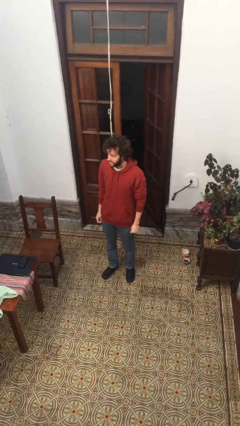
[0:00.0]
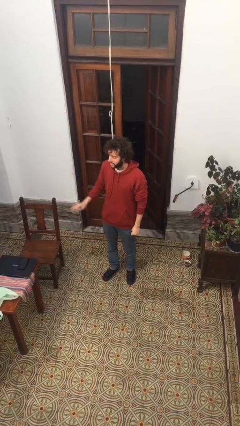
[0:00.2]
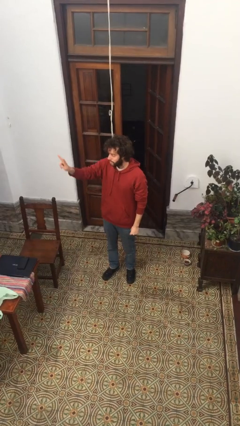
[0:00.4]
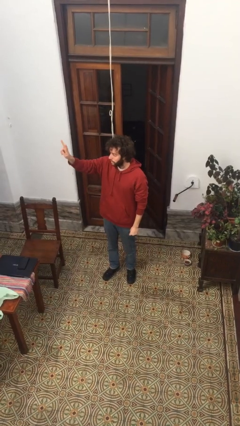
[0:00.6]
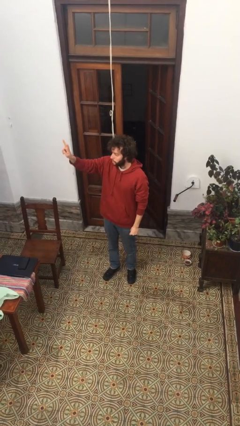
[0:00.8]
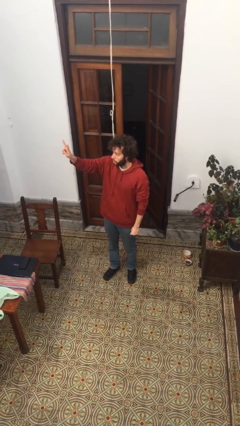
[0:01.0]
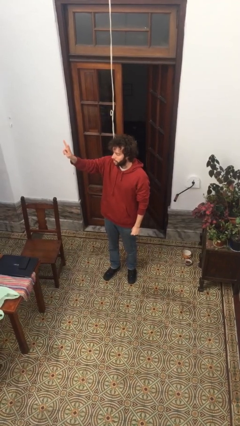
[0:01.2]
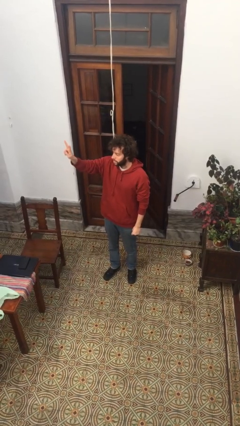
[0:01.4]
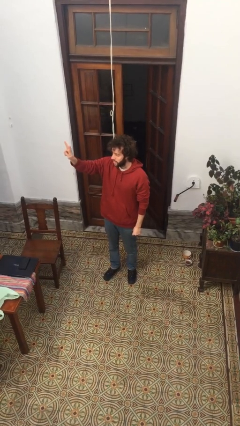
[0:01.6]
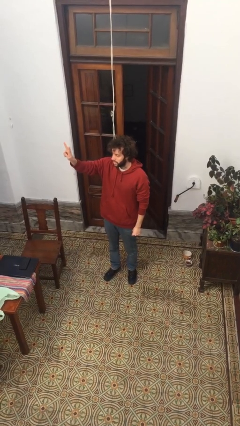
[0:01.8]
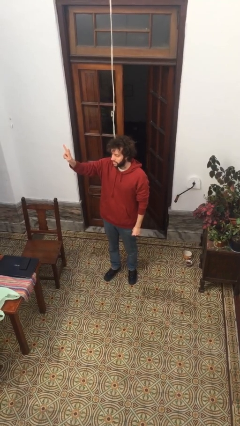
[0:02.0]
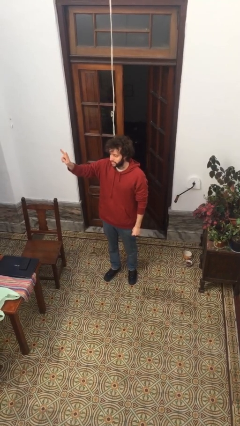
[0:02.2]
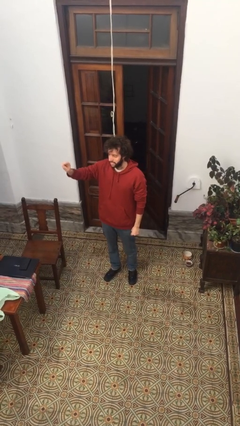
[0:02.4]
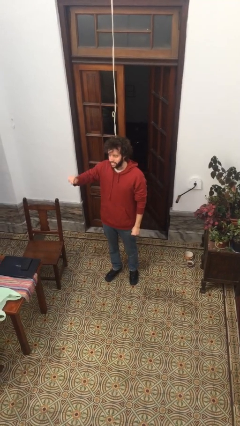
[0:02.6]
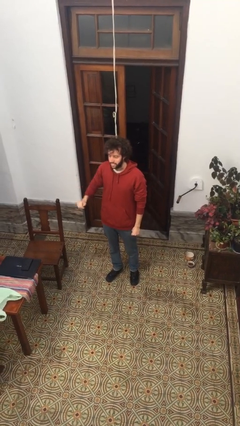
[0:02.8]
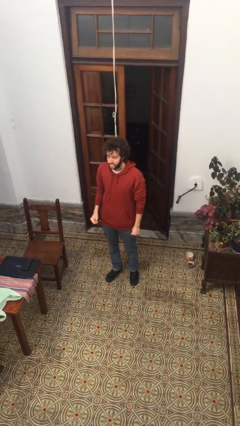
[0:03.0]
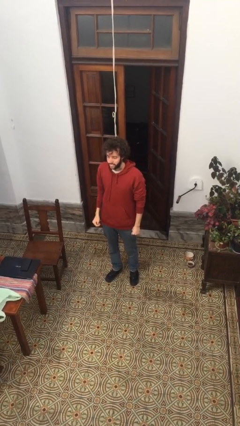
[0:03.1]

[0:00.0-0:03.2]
person gestures peace

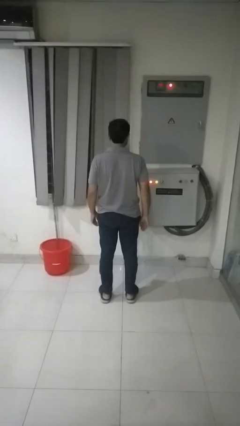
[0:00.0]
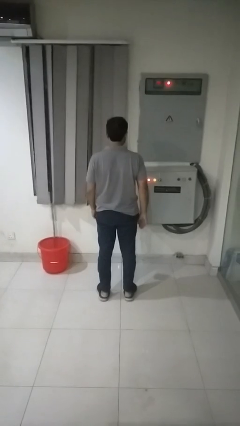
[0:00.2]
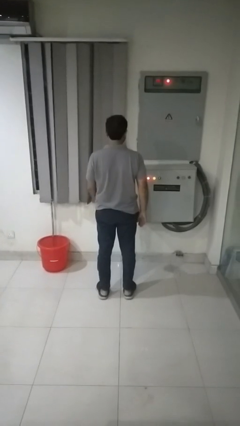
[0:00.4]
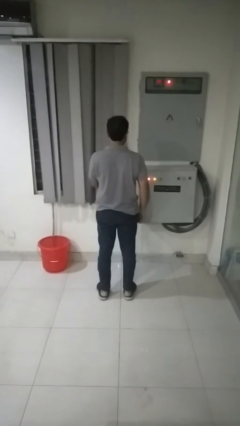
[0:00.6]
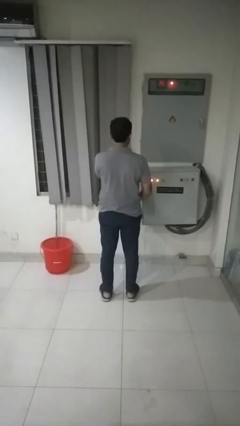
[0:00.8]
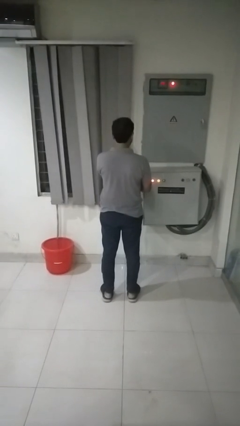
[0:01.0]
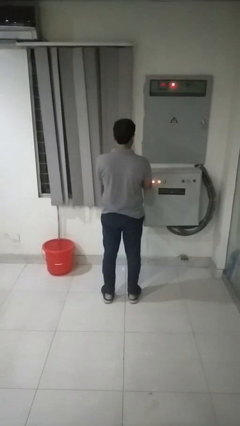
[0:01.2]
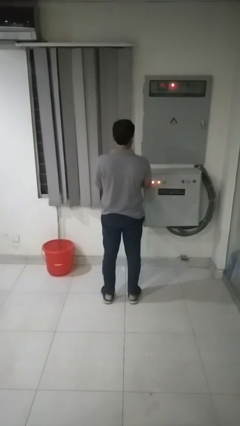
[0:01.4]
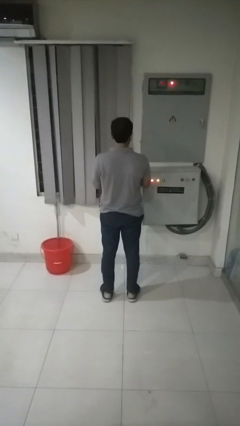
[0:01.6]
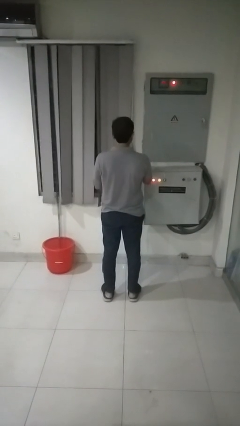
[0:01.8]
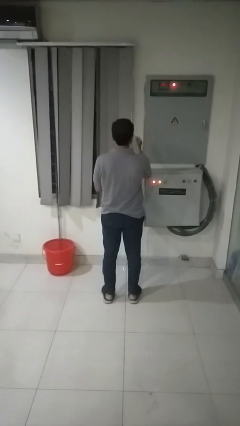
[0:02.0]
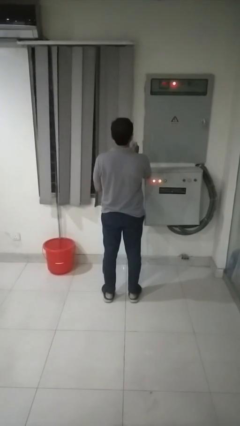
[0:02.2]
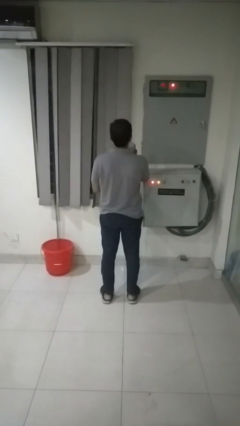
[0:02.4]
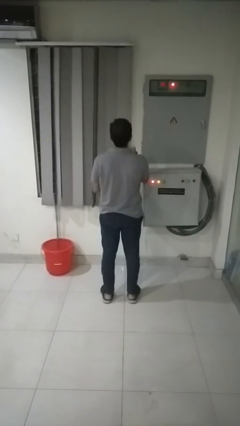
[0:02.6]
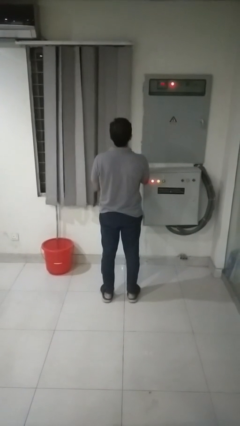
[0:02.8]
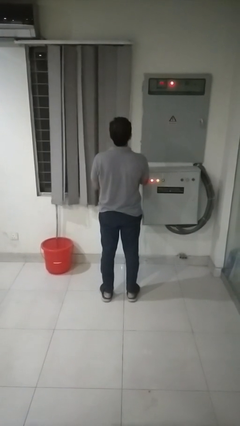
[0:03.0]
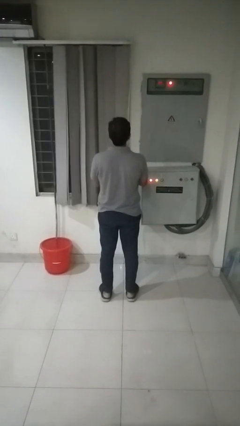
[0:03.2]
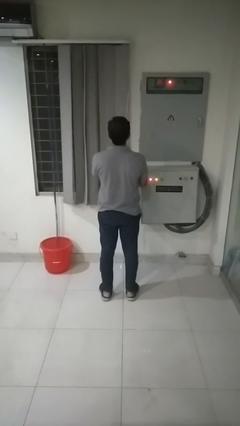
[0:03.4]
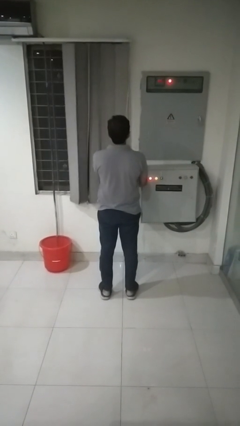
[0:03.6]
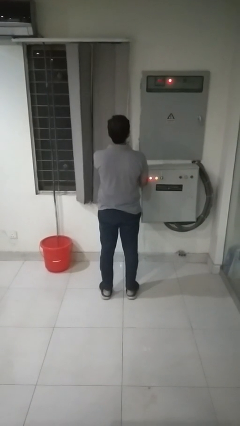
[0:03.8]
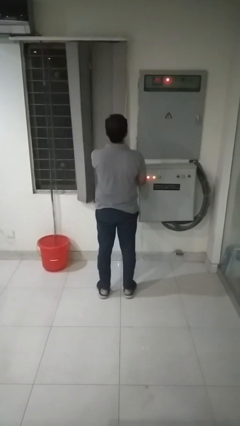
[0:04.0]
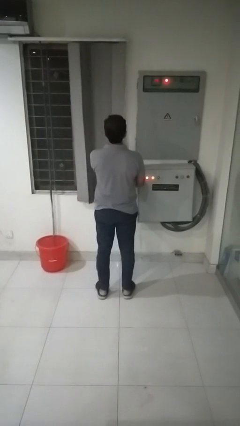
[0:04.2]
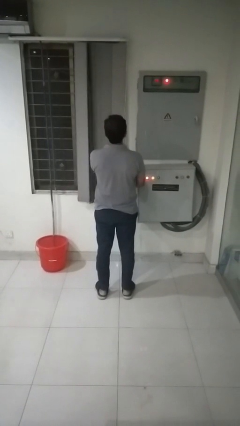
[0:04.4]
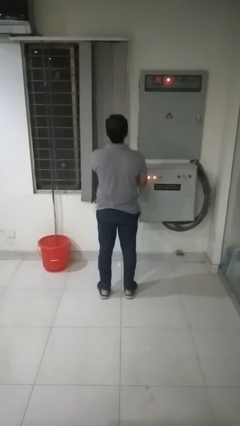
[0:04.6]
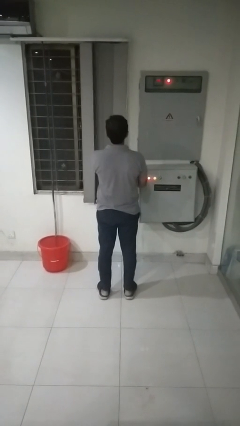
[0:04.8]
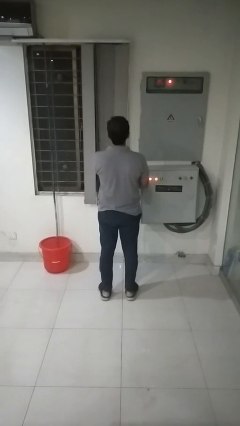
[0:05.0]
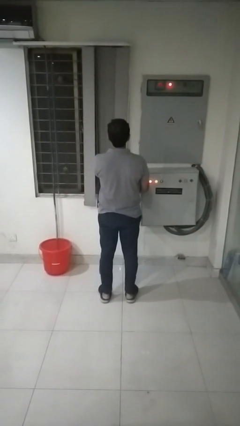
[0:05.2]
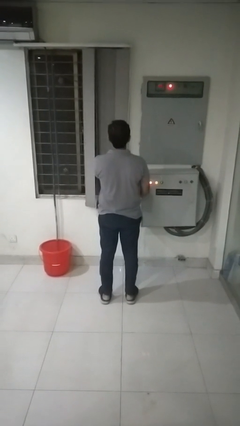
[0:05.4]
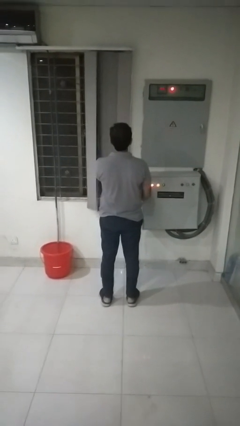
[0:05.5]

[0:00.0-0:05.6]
person opens curtains

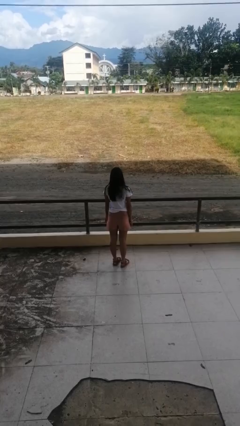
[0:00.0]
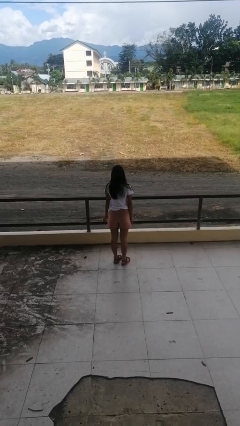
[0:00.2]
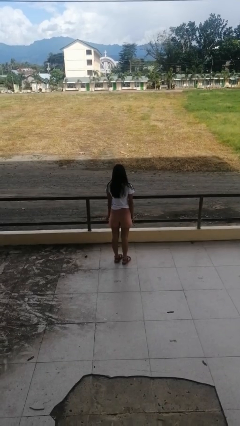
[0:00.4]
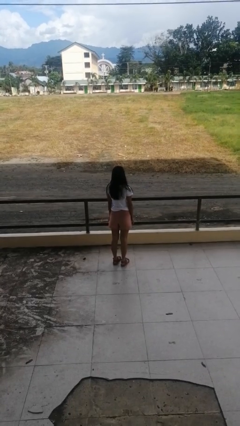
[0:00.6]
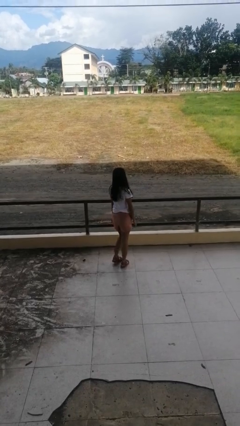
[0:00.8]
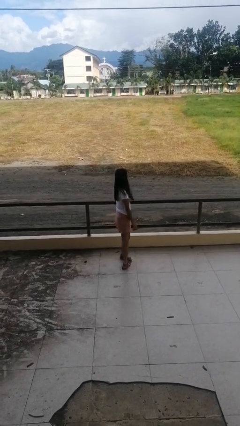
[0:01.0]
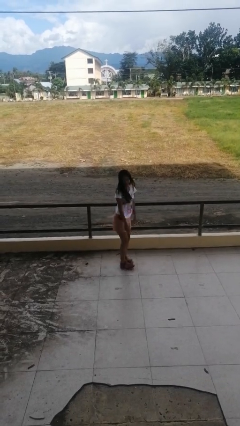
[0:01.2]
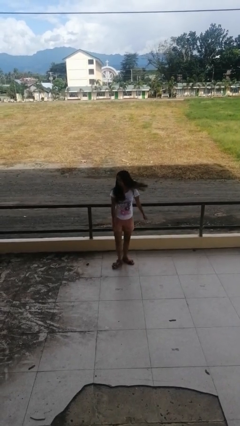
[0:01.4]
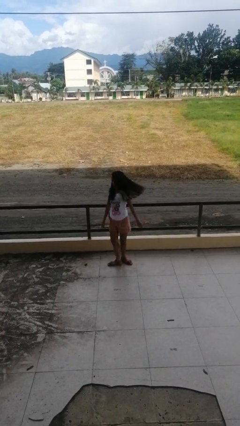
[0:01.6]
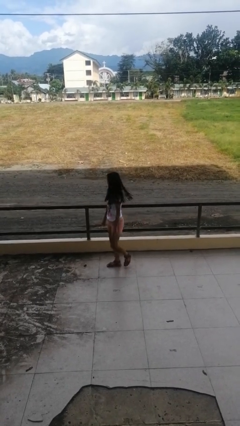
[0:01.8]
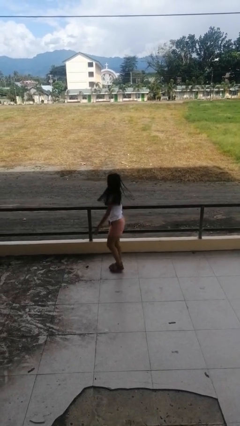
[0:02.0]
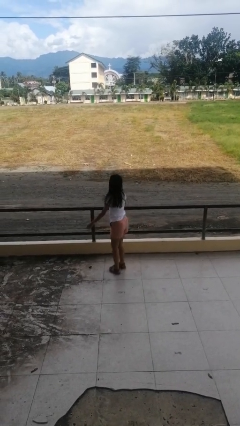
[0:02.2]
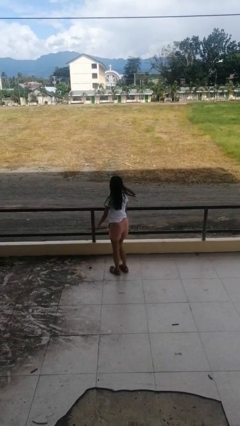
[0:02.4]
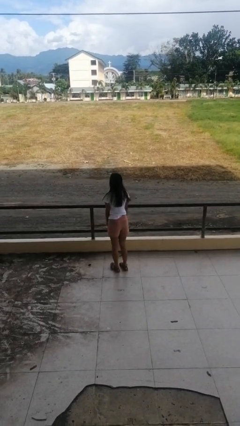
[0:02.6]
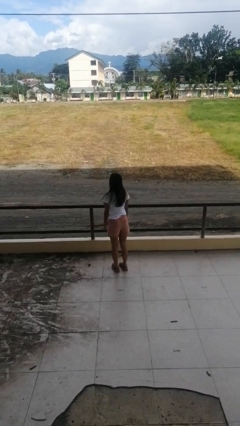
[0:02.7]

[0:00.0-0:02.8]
person twirls

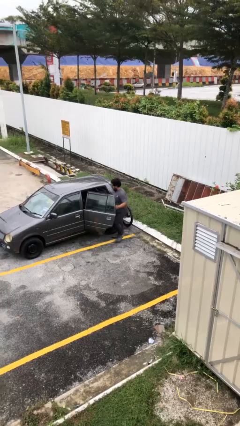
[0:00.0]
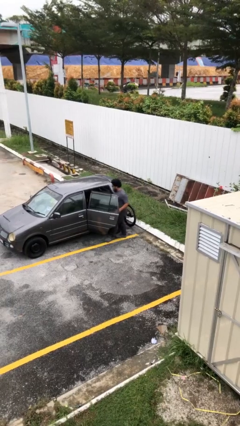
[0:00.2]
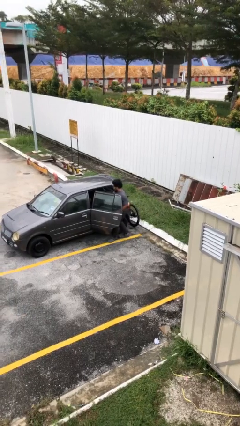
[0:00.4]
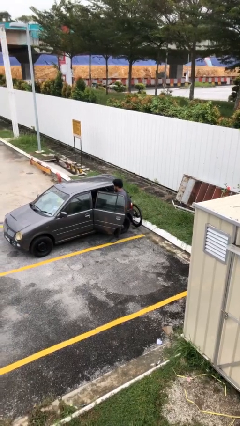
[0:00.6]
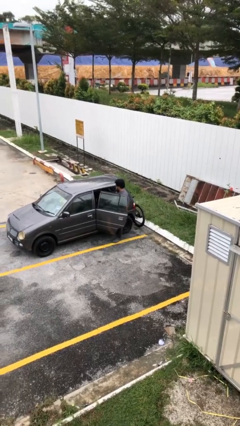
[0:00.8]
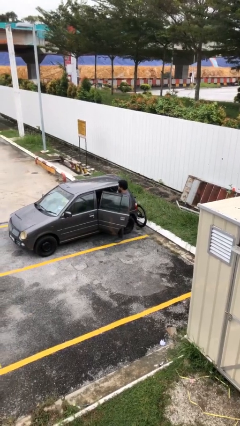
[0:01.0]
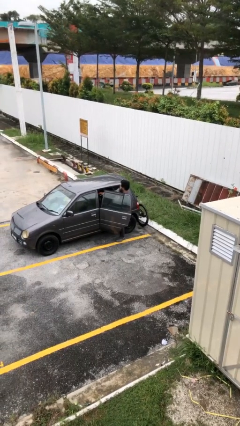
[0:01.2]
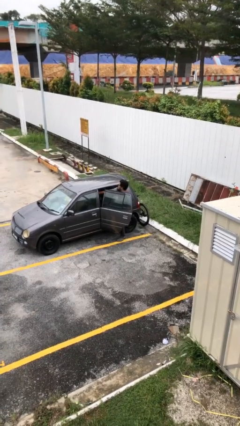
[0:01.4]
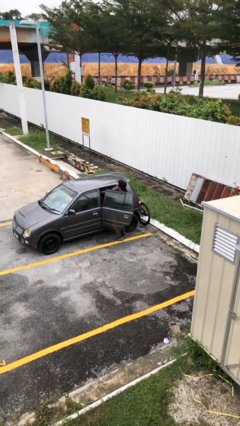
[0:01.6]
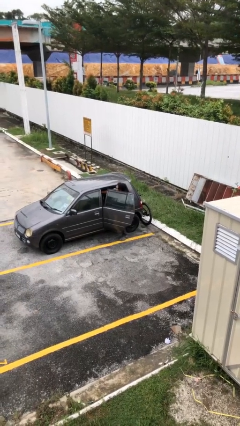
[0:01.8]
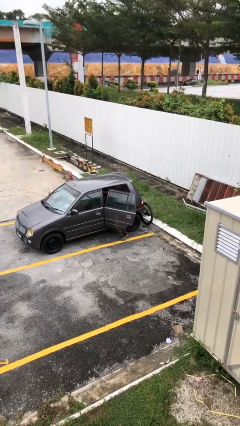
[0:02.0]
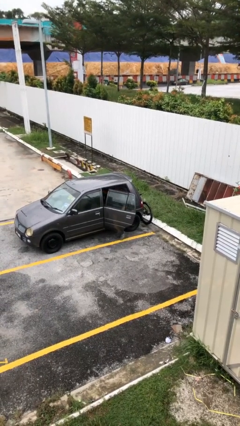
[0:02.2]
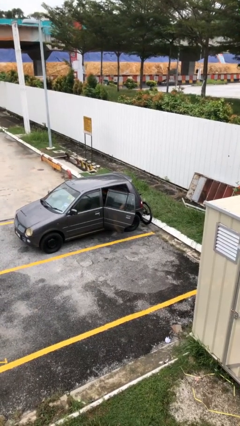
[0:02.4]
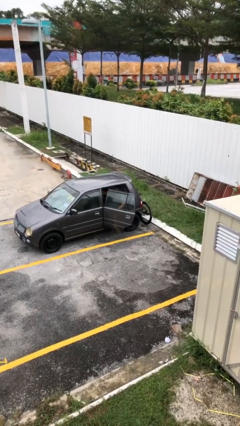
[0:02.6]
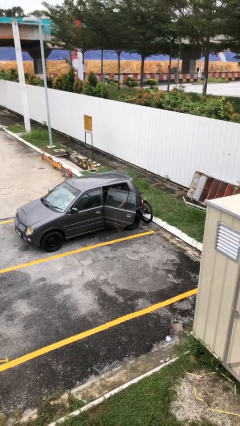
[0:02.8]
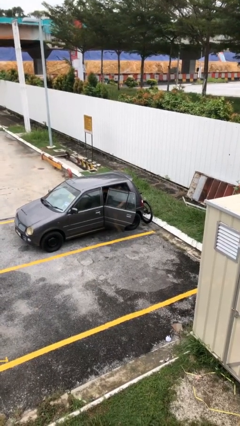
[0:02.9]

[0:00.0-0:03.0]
person enters car

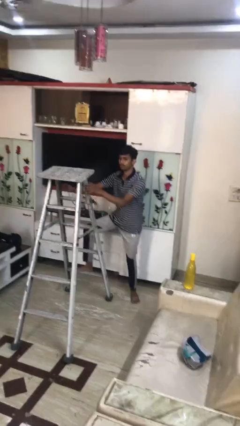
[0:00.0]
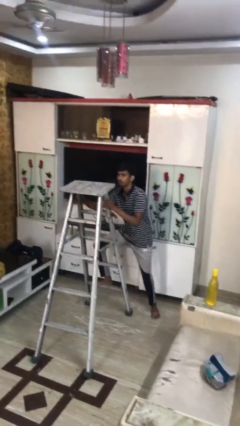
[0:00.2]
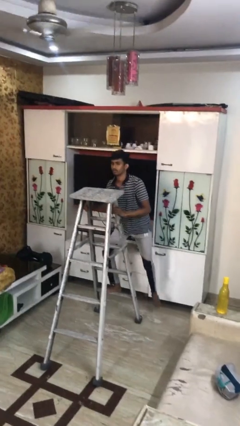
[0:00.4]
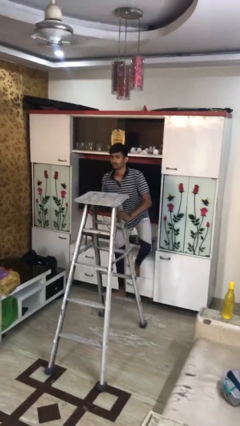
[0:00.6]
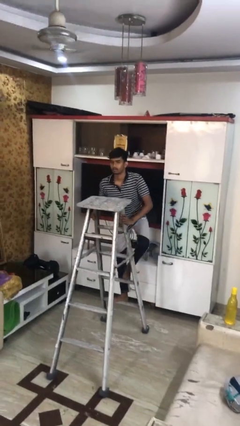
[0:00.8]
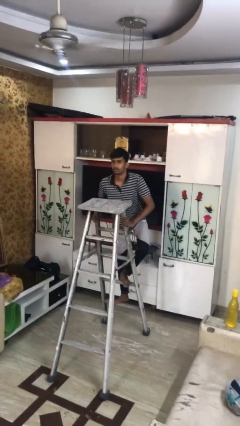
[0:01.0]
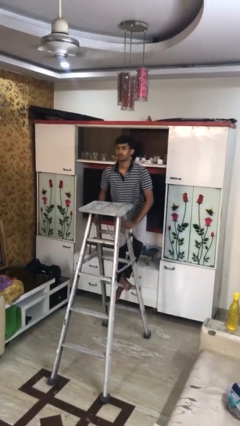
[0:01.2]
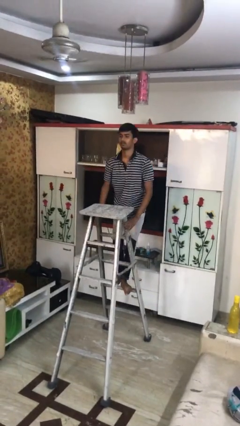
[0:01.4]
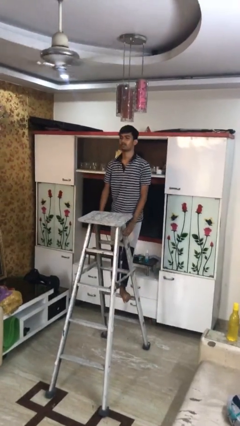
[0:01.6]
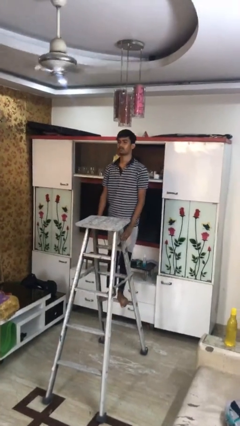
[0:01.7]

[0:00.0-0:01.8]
person climbs up ladder

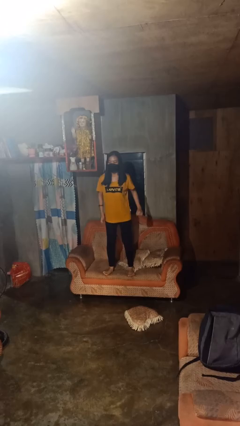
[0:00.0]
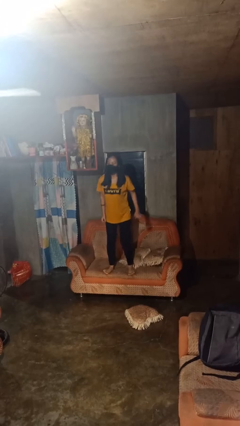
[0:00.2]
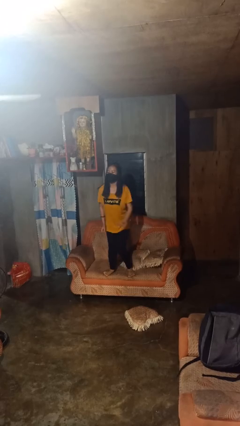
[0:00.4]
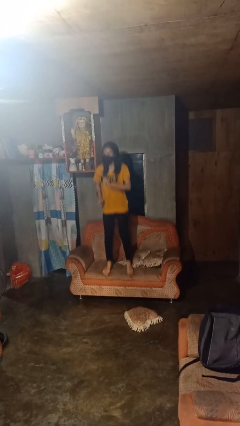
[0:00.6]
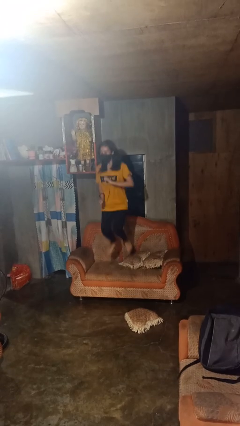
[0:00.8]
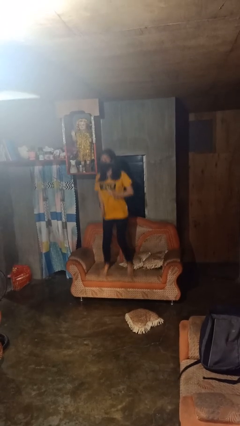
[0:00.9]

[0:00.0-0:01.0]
person jumps on couch

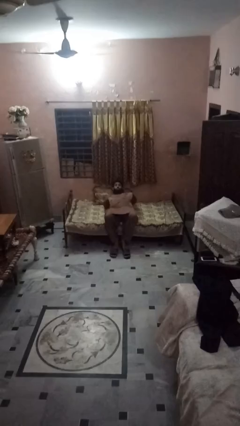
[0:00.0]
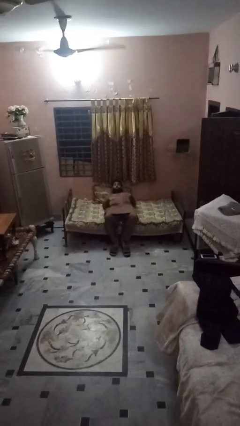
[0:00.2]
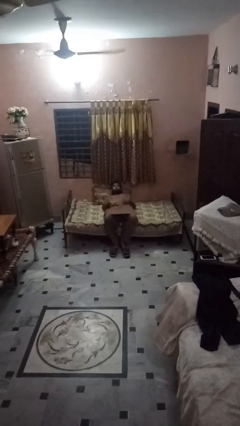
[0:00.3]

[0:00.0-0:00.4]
person stands up
